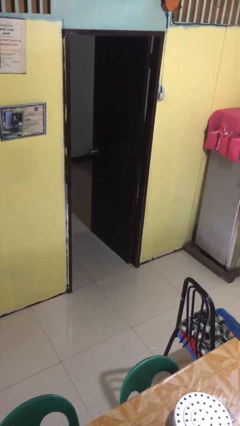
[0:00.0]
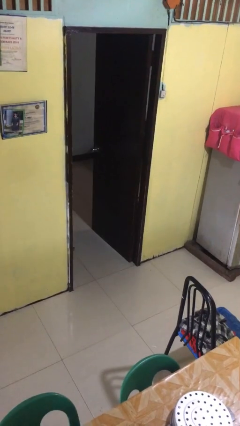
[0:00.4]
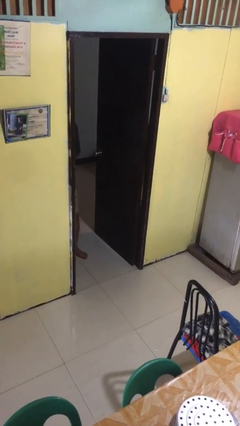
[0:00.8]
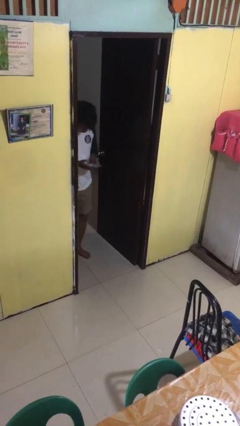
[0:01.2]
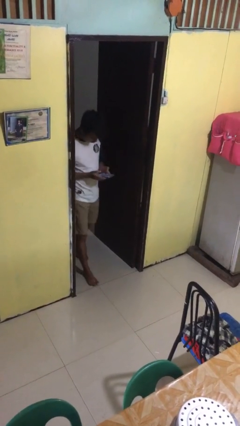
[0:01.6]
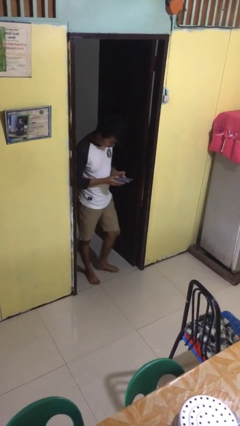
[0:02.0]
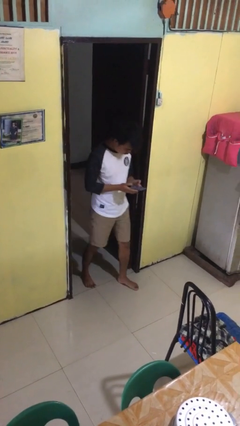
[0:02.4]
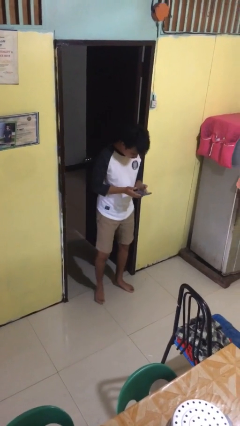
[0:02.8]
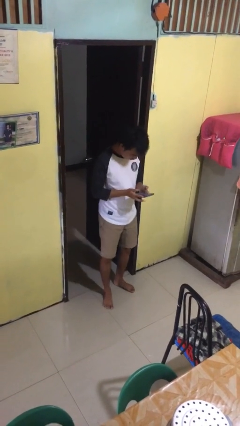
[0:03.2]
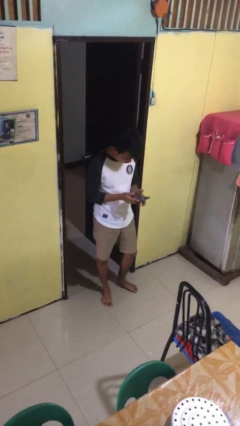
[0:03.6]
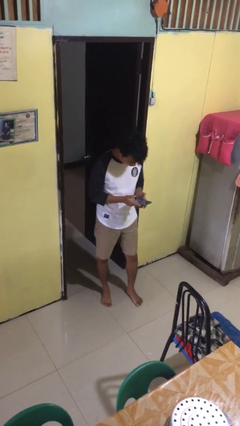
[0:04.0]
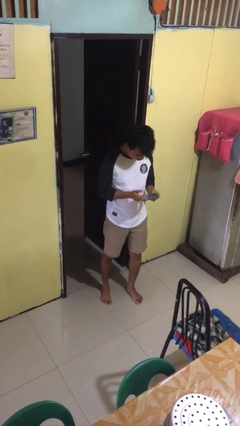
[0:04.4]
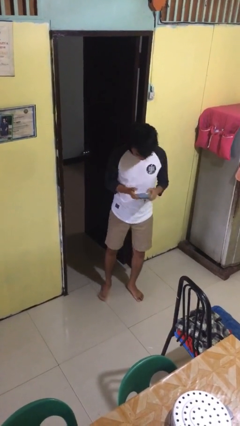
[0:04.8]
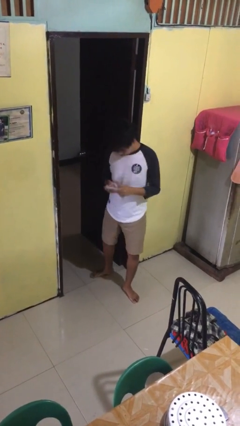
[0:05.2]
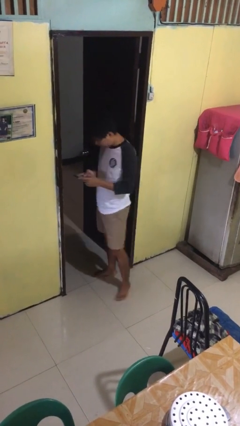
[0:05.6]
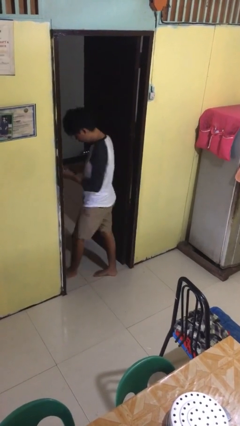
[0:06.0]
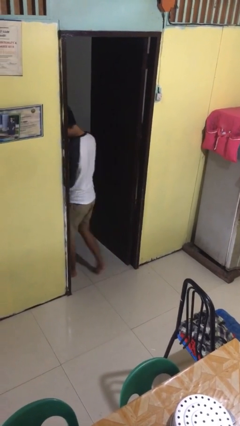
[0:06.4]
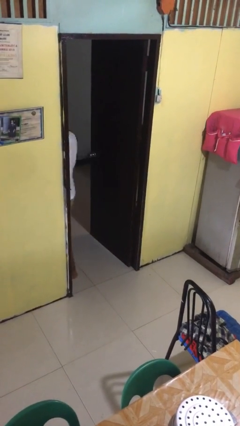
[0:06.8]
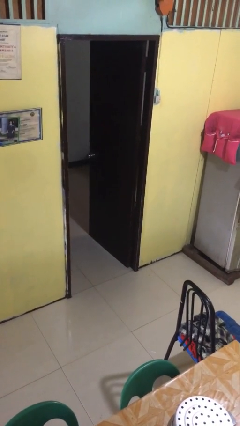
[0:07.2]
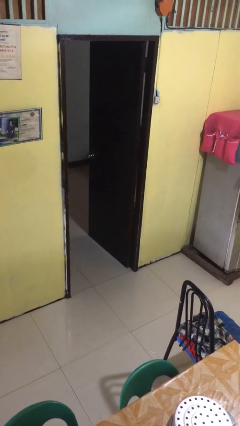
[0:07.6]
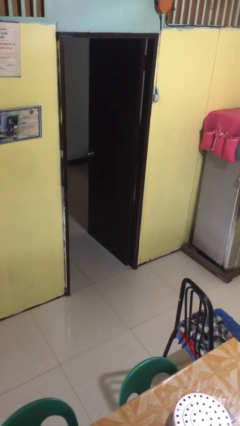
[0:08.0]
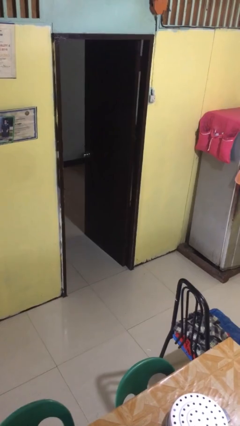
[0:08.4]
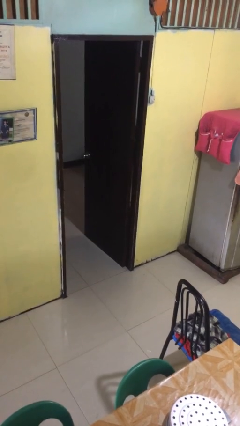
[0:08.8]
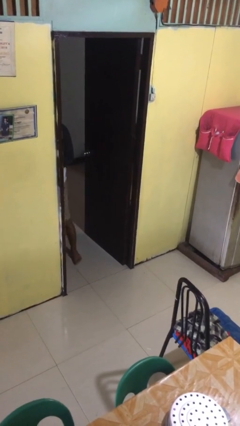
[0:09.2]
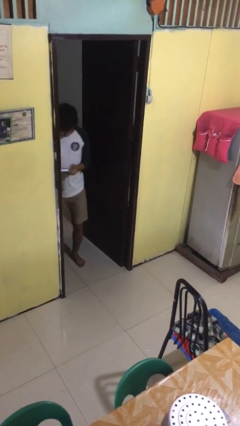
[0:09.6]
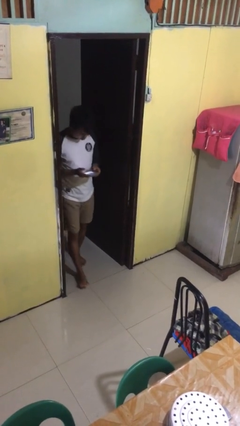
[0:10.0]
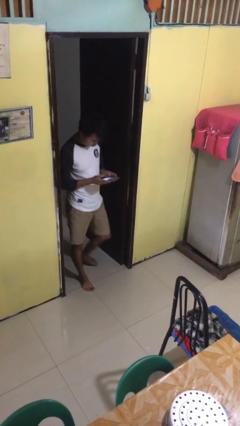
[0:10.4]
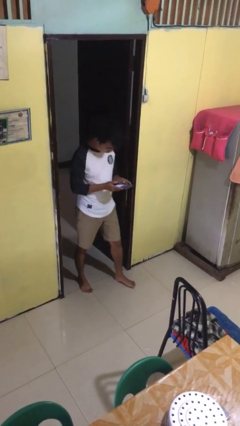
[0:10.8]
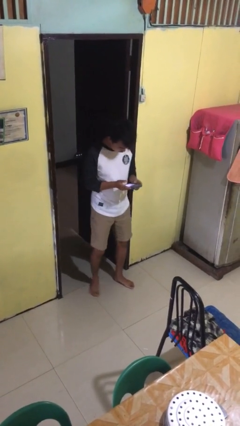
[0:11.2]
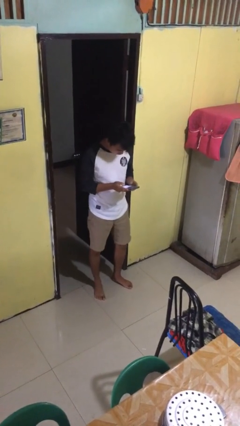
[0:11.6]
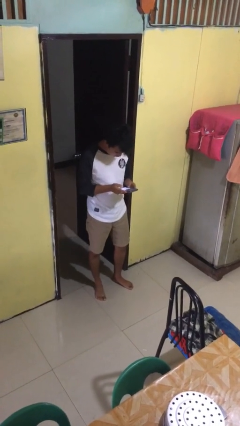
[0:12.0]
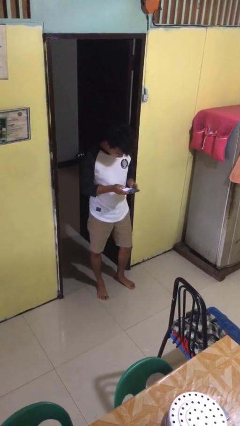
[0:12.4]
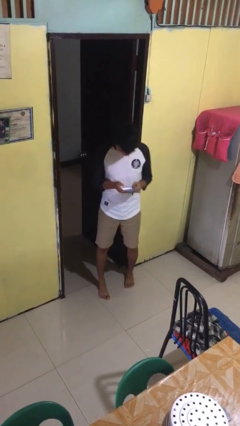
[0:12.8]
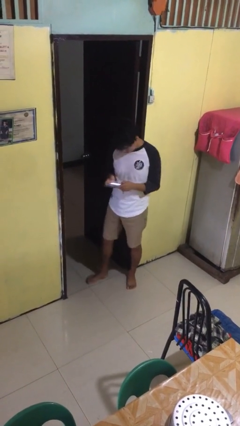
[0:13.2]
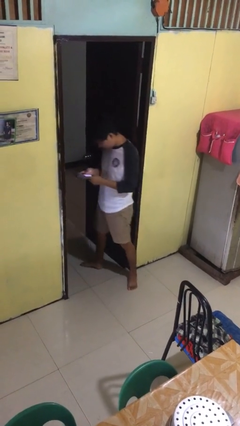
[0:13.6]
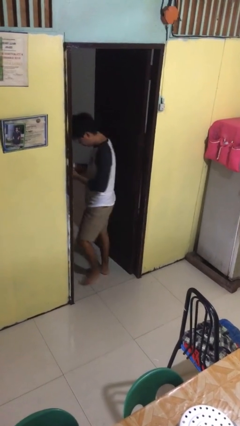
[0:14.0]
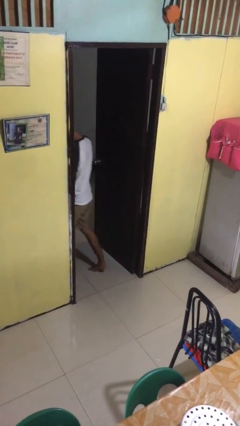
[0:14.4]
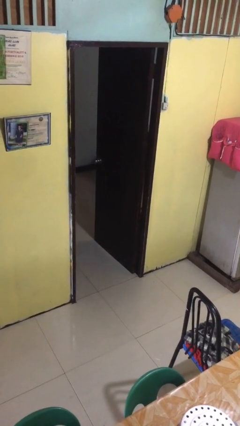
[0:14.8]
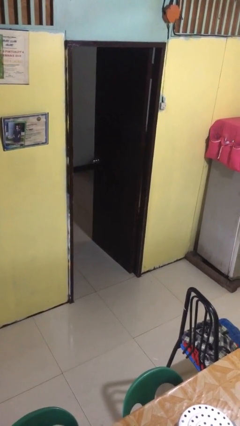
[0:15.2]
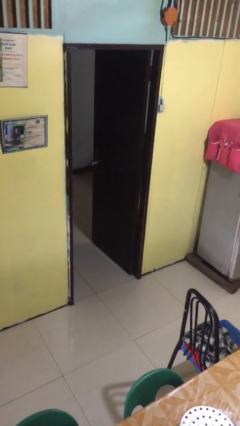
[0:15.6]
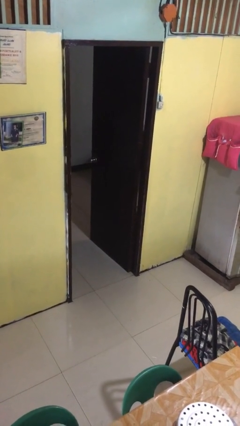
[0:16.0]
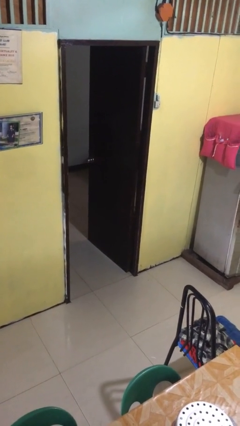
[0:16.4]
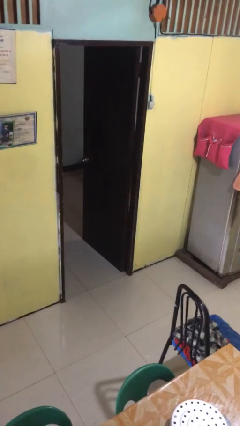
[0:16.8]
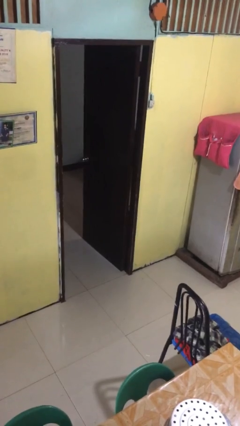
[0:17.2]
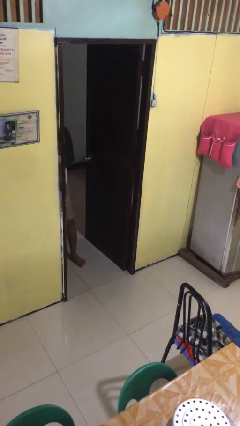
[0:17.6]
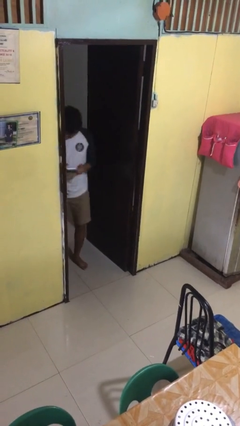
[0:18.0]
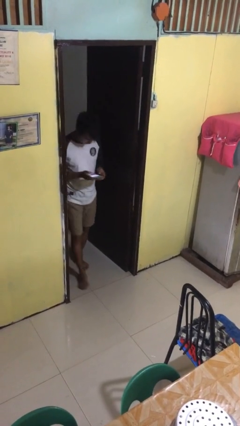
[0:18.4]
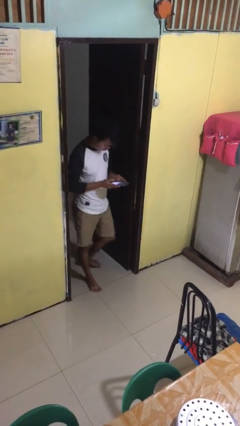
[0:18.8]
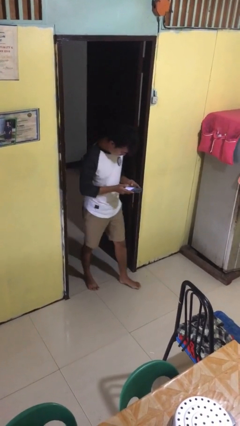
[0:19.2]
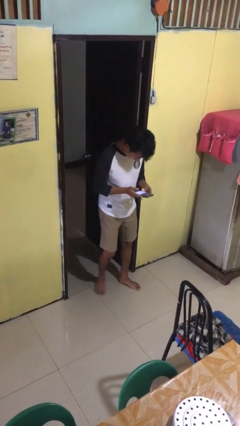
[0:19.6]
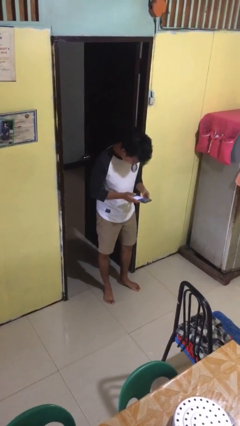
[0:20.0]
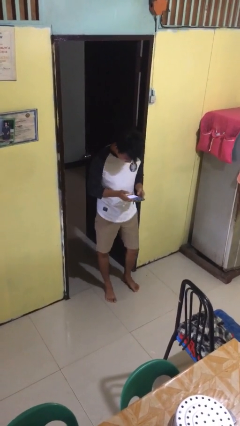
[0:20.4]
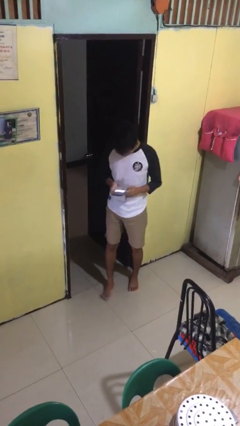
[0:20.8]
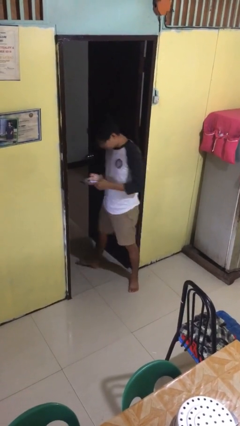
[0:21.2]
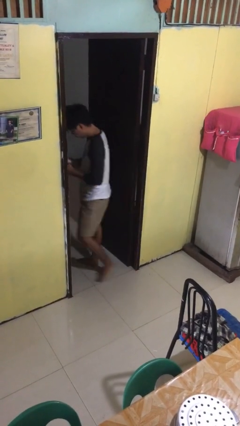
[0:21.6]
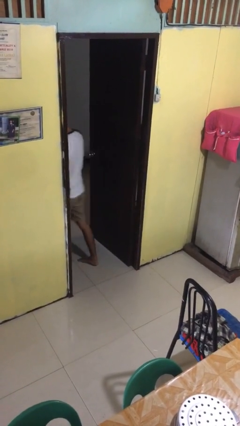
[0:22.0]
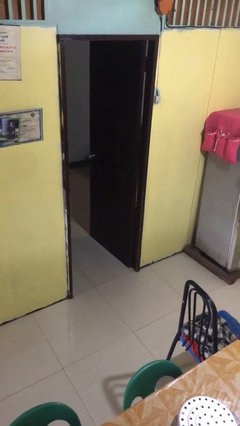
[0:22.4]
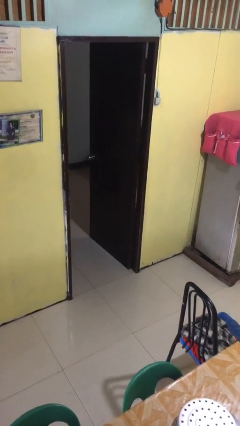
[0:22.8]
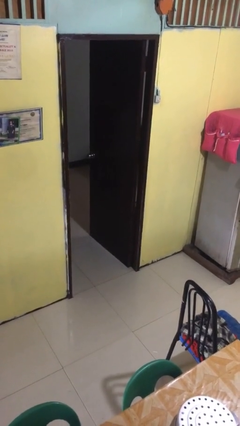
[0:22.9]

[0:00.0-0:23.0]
person texts on phone

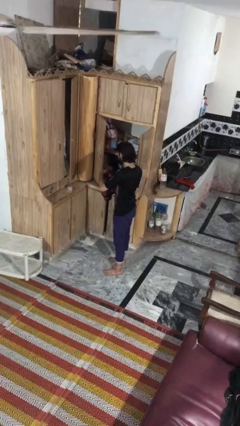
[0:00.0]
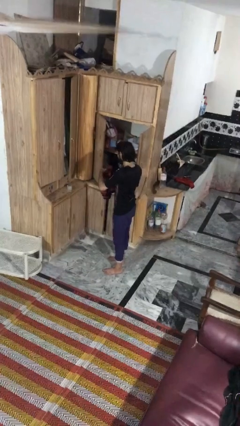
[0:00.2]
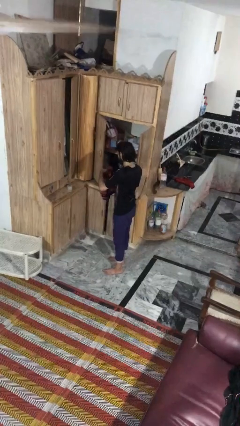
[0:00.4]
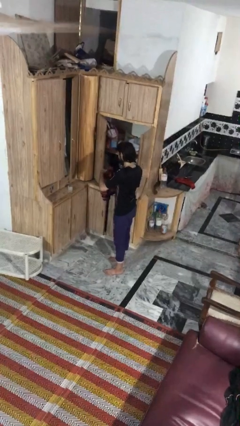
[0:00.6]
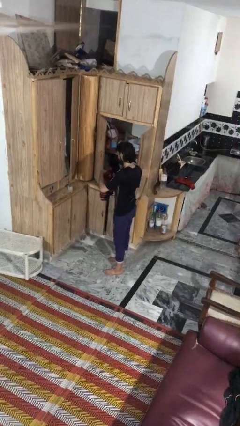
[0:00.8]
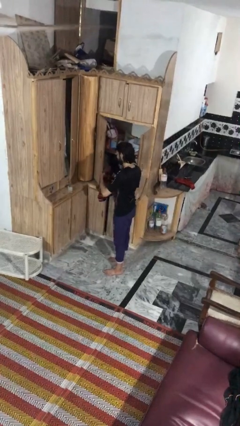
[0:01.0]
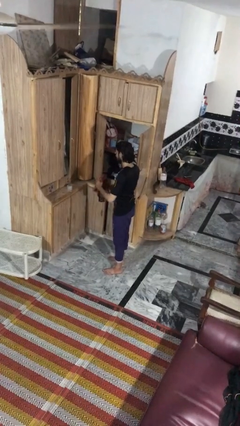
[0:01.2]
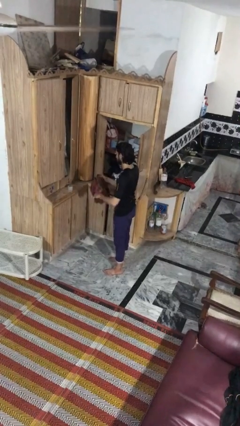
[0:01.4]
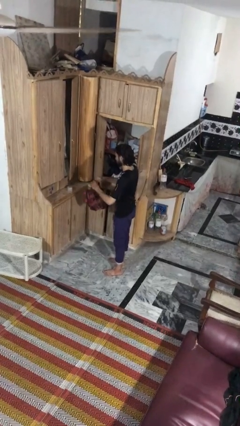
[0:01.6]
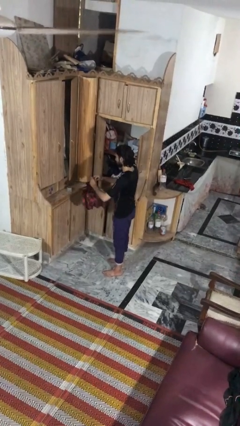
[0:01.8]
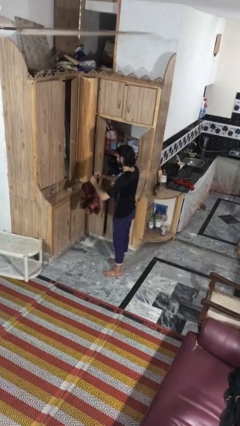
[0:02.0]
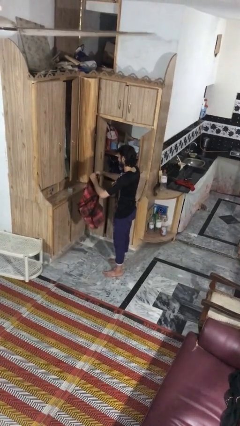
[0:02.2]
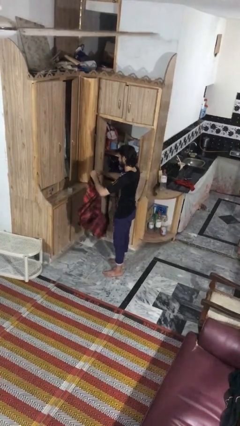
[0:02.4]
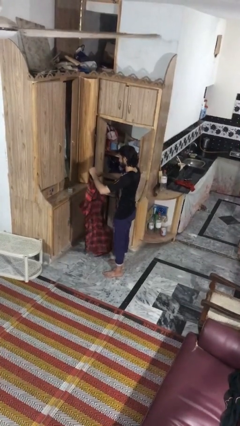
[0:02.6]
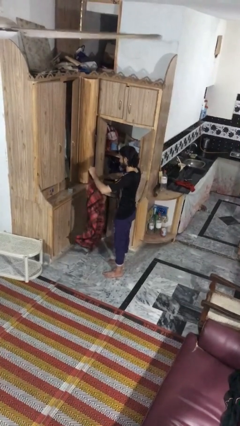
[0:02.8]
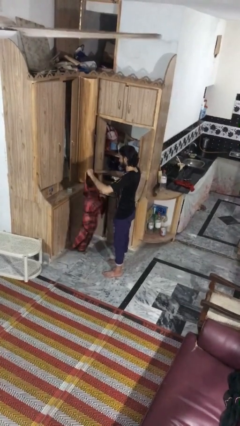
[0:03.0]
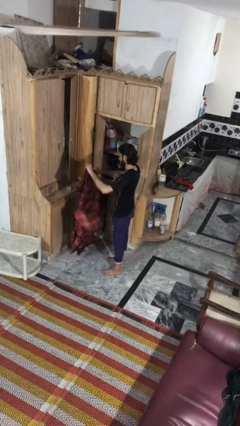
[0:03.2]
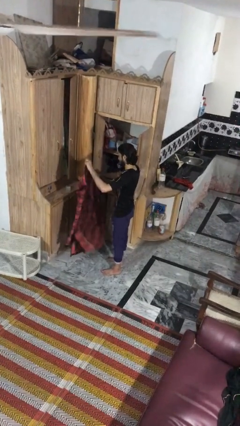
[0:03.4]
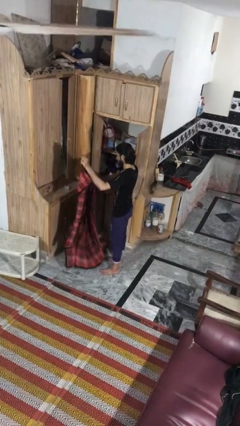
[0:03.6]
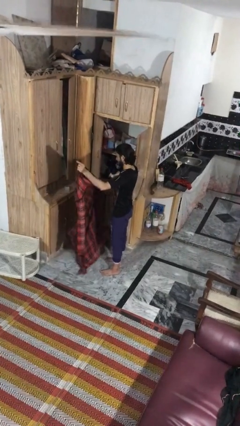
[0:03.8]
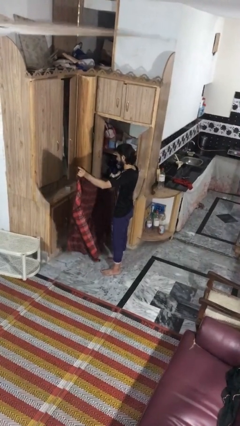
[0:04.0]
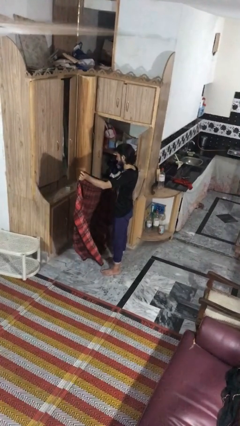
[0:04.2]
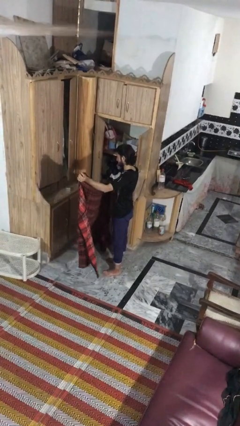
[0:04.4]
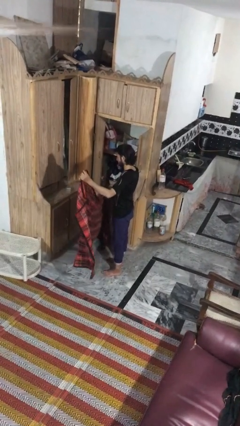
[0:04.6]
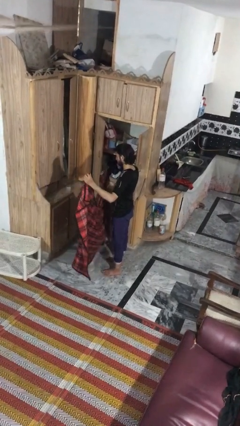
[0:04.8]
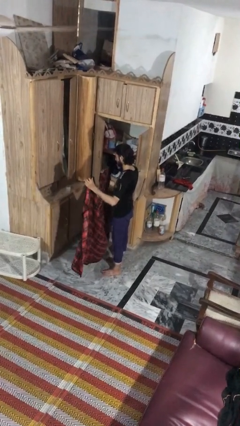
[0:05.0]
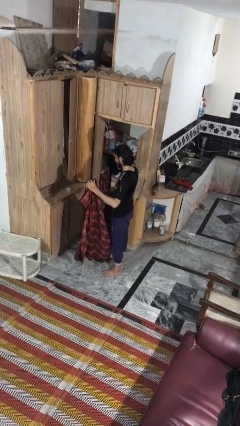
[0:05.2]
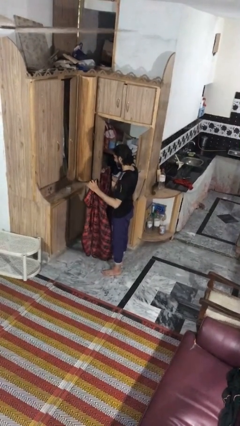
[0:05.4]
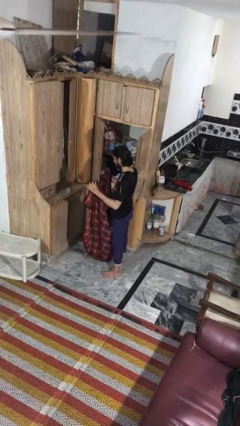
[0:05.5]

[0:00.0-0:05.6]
person unfolds blanket

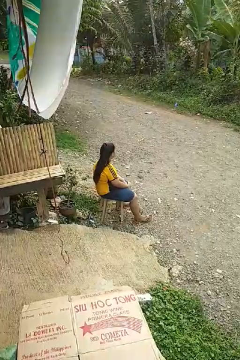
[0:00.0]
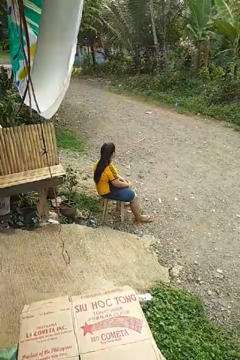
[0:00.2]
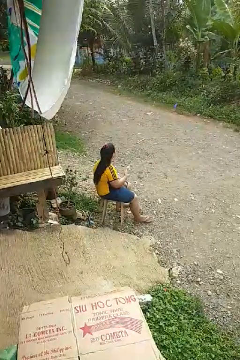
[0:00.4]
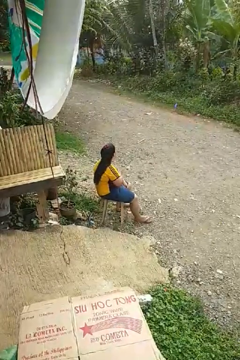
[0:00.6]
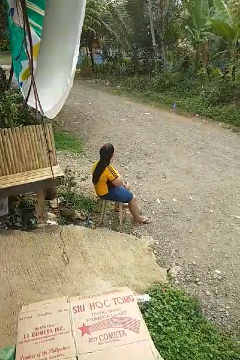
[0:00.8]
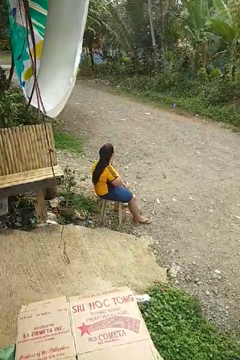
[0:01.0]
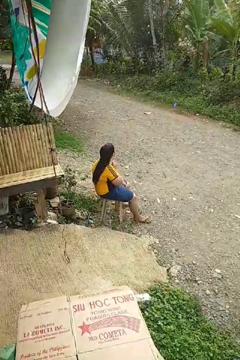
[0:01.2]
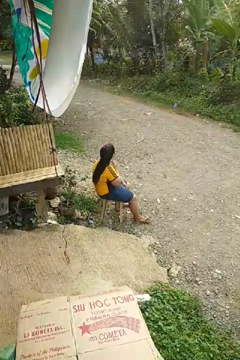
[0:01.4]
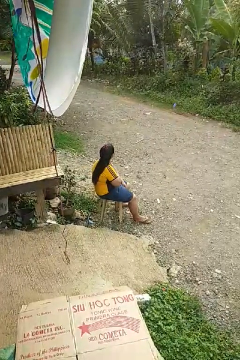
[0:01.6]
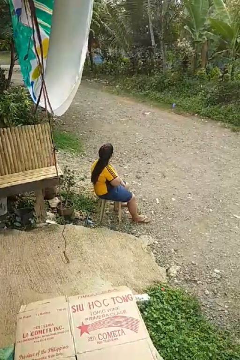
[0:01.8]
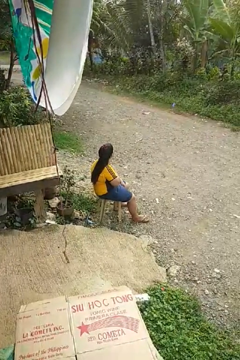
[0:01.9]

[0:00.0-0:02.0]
person drums on chest
